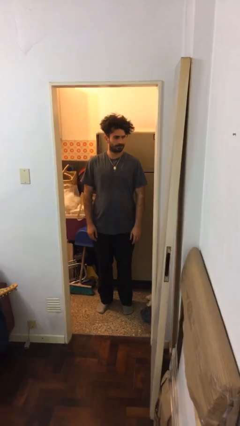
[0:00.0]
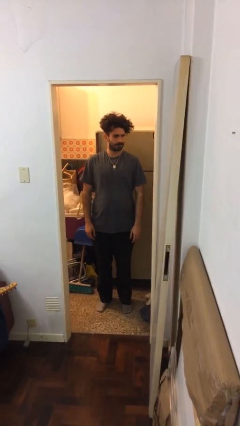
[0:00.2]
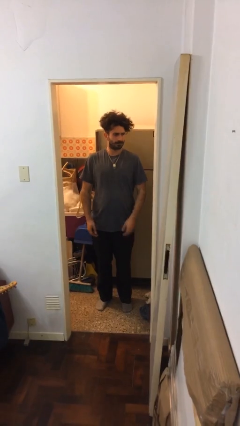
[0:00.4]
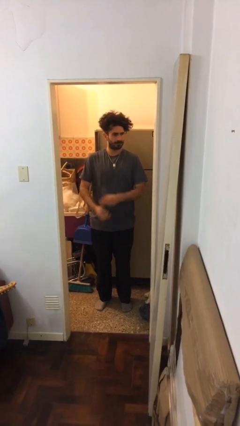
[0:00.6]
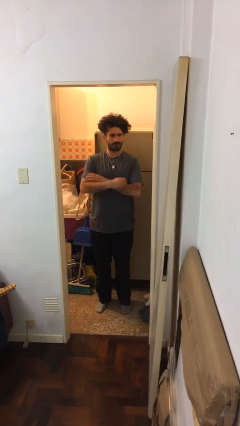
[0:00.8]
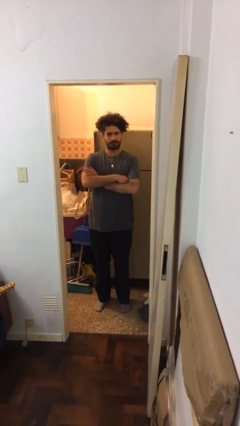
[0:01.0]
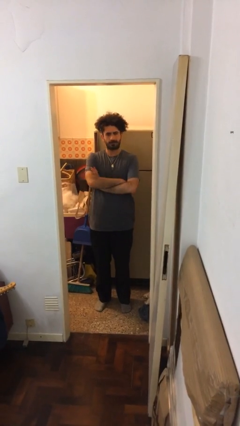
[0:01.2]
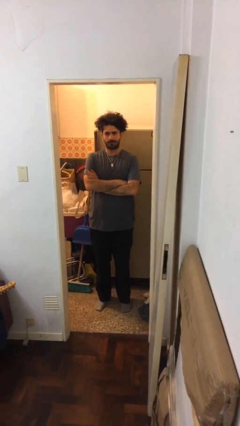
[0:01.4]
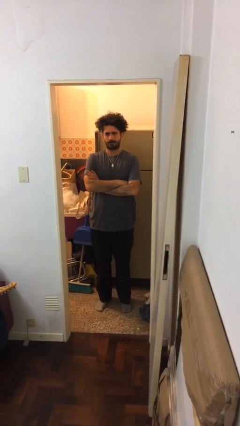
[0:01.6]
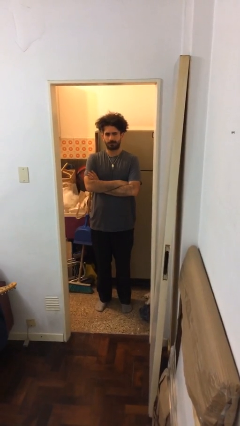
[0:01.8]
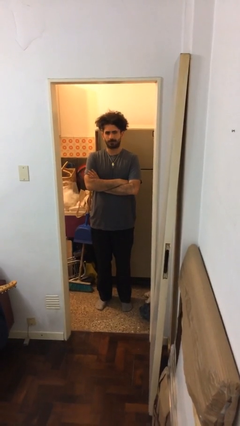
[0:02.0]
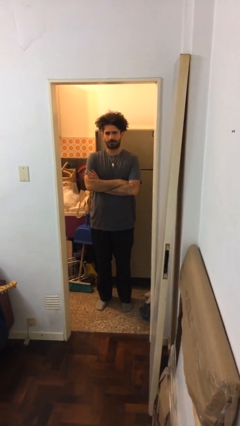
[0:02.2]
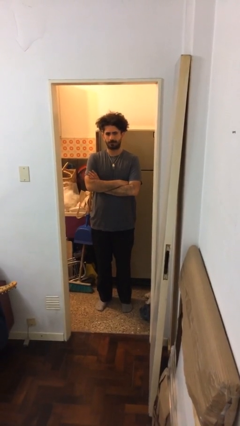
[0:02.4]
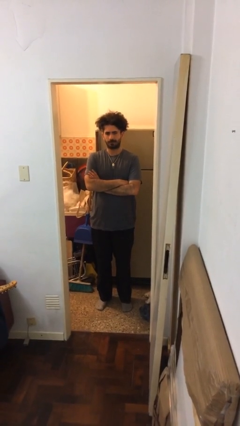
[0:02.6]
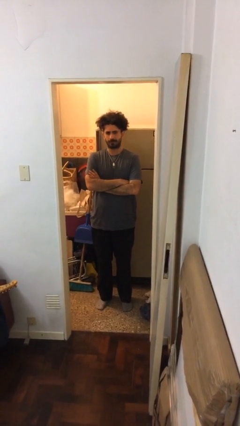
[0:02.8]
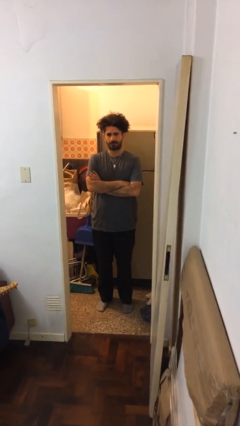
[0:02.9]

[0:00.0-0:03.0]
person crosses arms

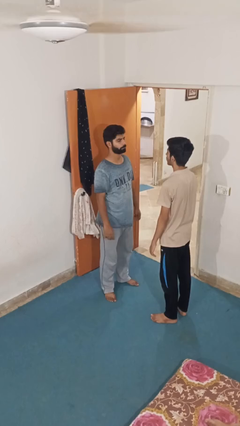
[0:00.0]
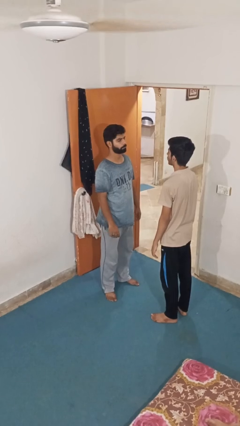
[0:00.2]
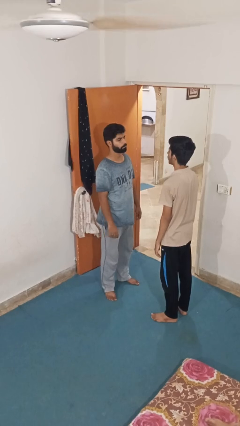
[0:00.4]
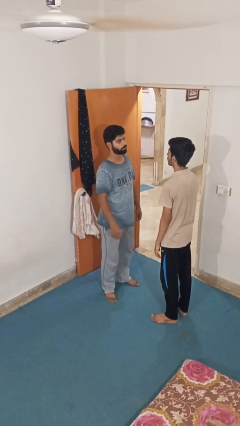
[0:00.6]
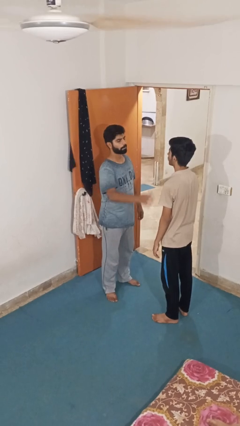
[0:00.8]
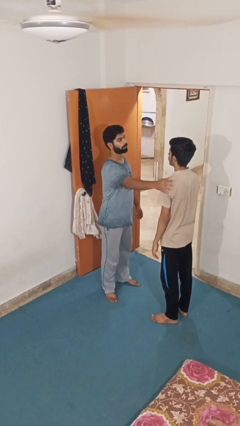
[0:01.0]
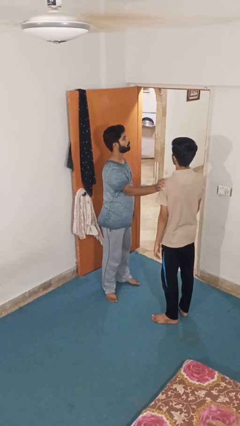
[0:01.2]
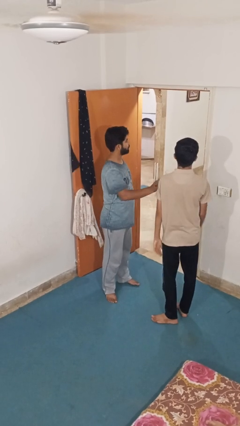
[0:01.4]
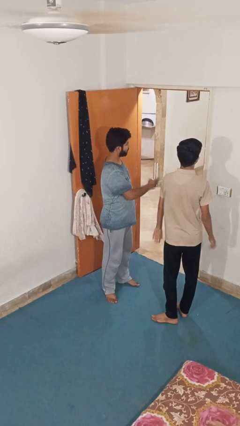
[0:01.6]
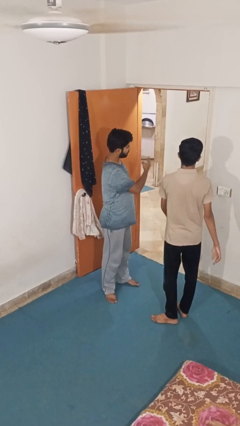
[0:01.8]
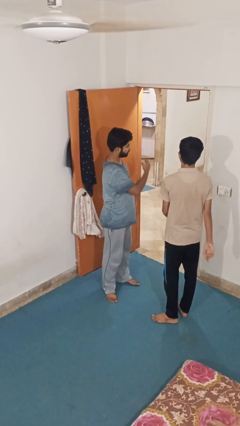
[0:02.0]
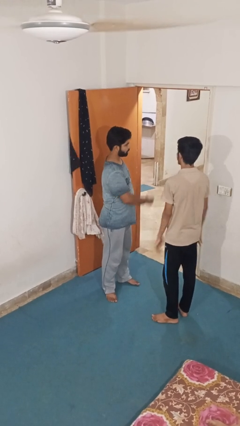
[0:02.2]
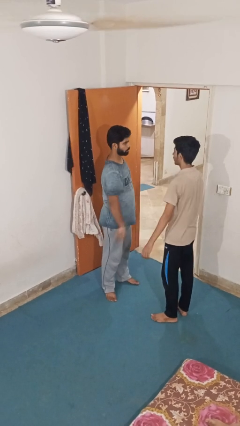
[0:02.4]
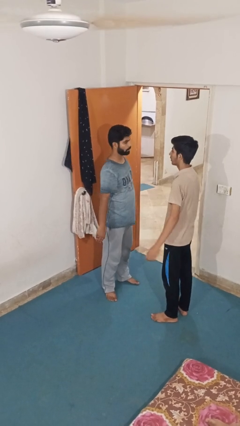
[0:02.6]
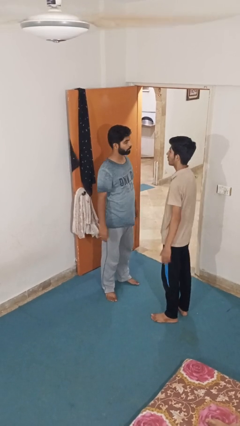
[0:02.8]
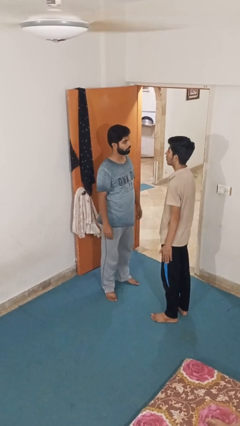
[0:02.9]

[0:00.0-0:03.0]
person shoves person

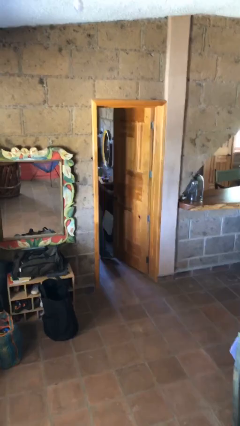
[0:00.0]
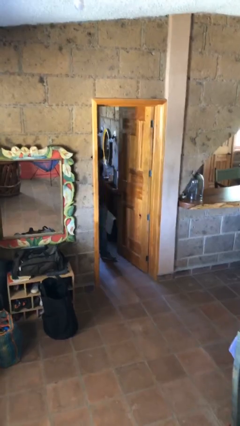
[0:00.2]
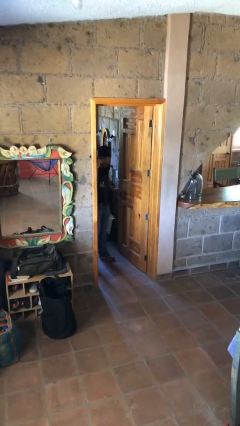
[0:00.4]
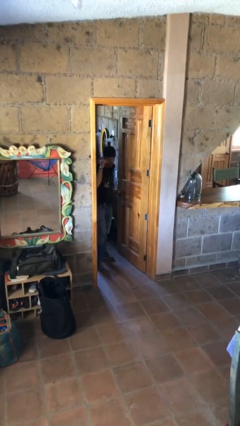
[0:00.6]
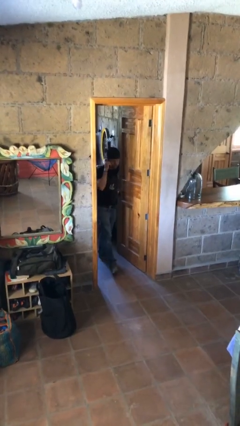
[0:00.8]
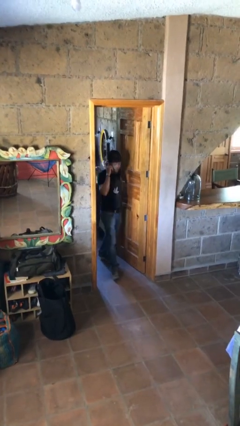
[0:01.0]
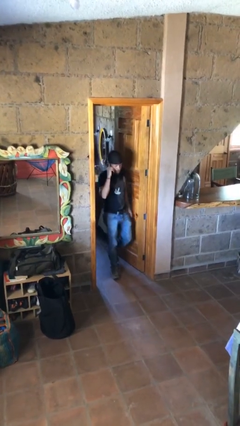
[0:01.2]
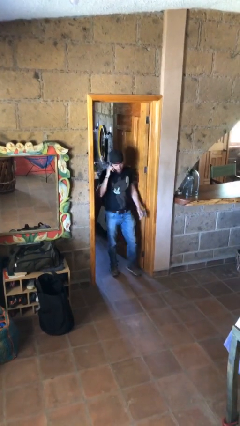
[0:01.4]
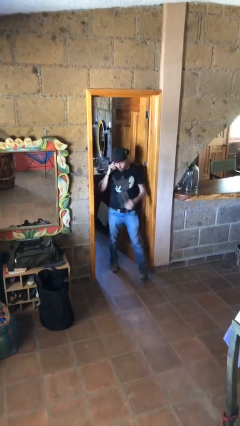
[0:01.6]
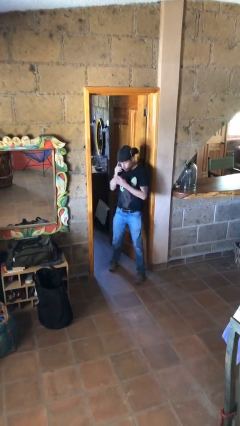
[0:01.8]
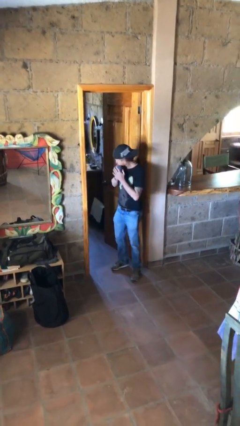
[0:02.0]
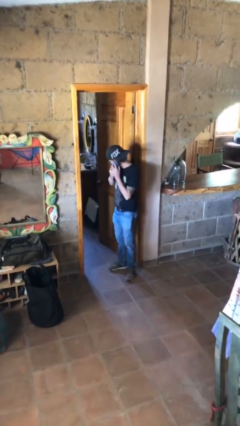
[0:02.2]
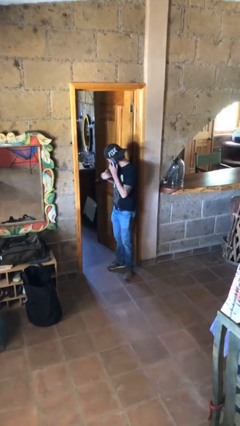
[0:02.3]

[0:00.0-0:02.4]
person enters scene through structure

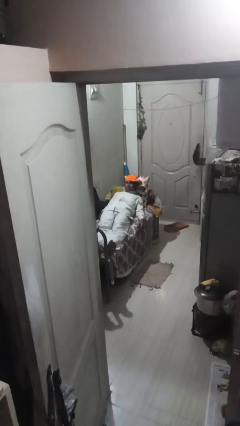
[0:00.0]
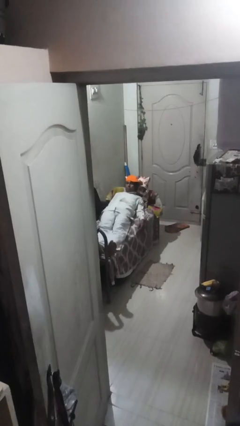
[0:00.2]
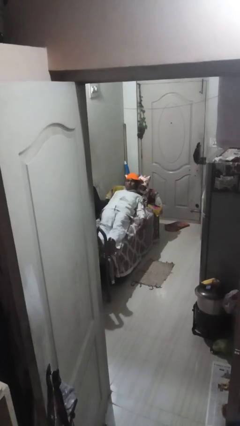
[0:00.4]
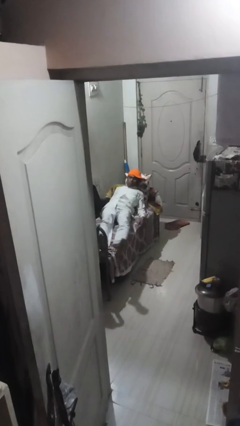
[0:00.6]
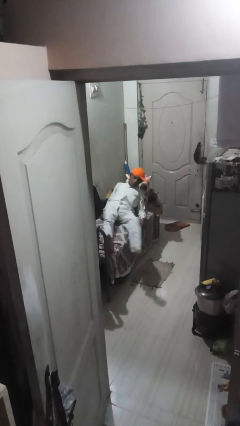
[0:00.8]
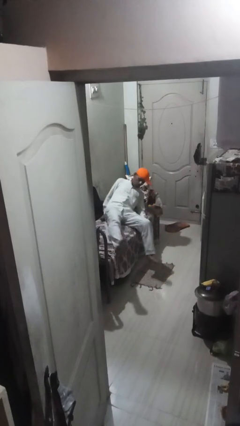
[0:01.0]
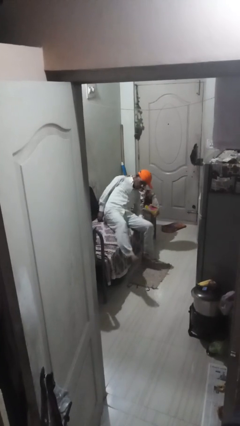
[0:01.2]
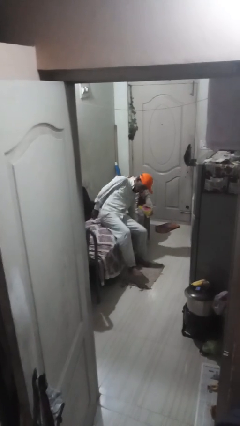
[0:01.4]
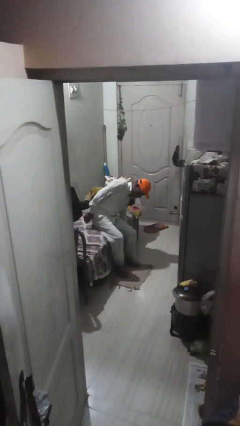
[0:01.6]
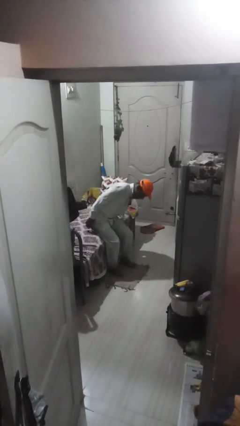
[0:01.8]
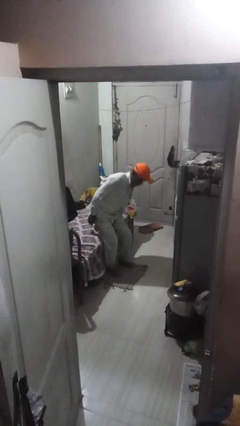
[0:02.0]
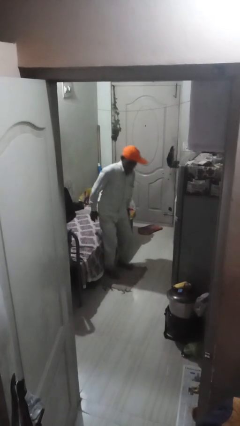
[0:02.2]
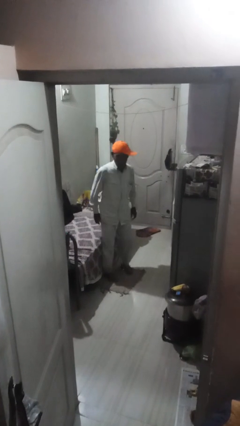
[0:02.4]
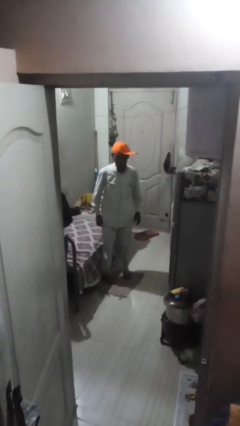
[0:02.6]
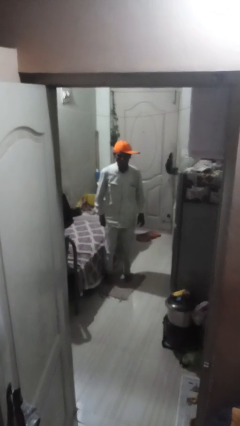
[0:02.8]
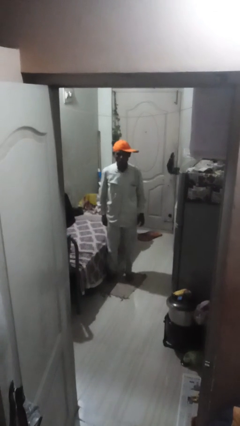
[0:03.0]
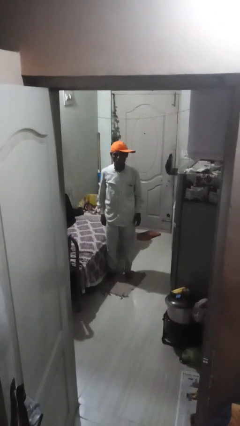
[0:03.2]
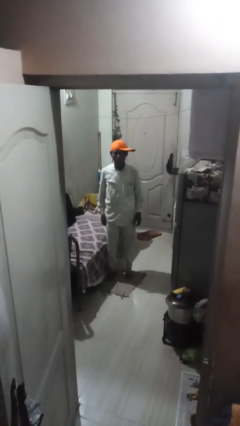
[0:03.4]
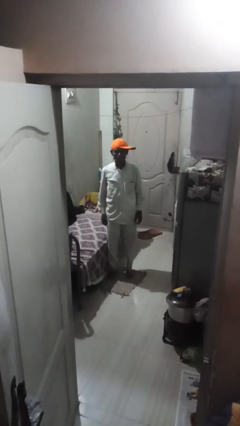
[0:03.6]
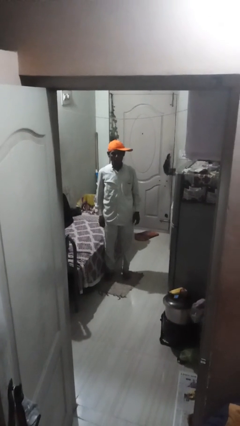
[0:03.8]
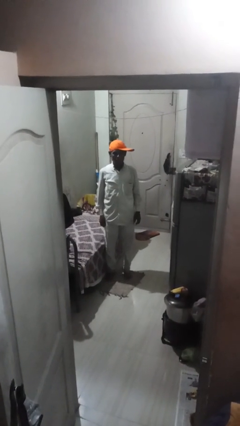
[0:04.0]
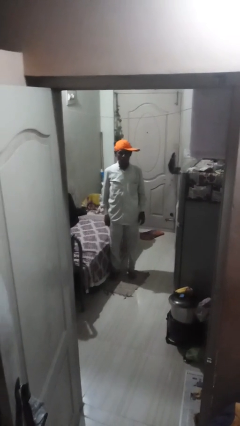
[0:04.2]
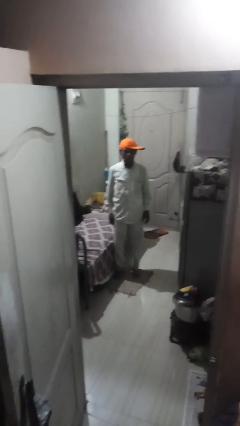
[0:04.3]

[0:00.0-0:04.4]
person stands up

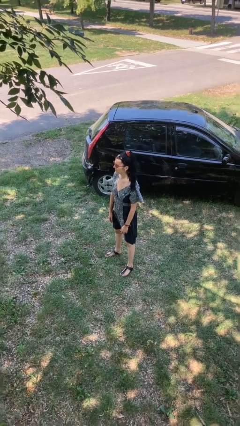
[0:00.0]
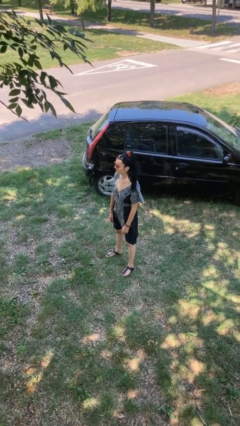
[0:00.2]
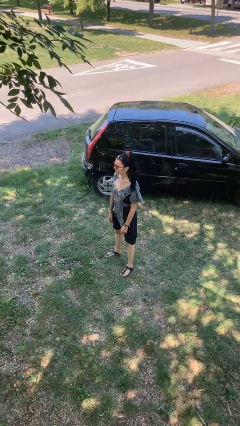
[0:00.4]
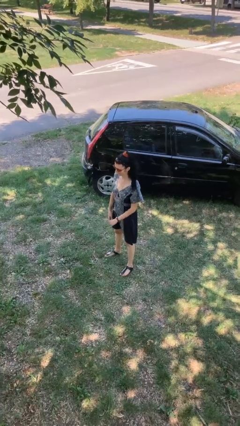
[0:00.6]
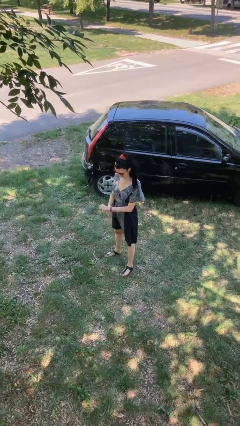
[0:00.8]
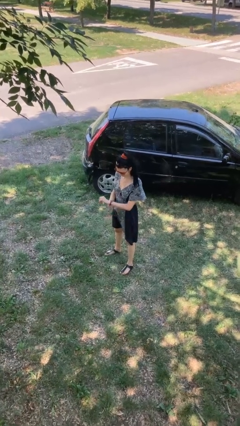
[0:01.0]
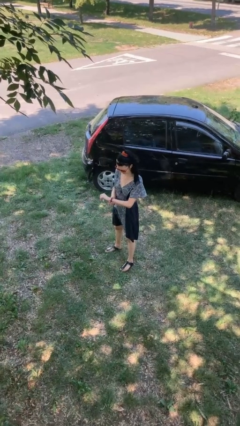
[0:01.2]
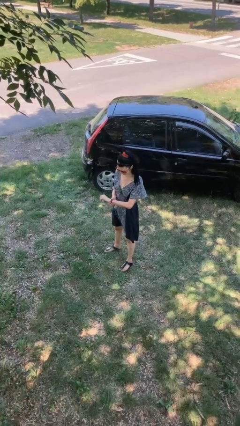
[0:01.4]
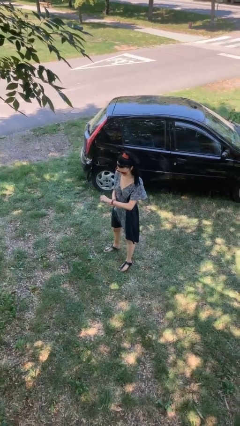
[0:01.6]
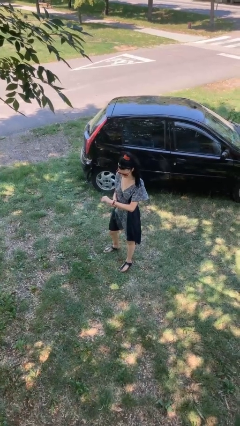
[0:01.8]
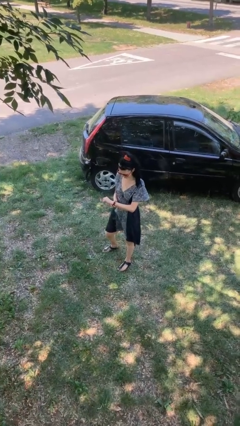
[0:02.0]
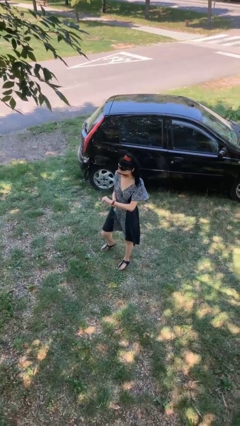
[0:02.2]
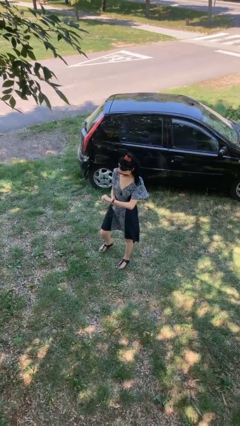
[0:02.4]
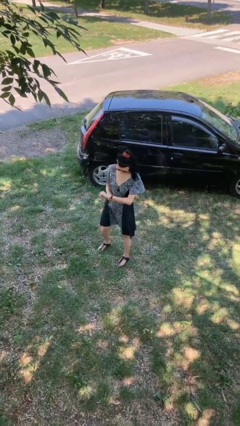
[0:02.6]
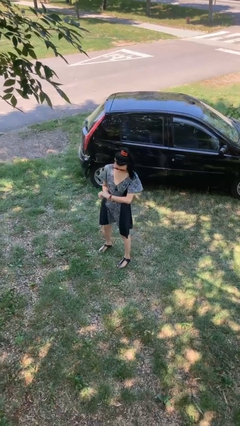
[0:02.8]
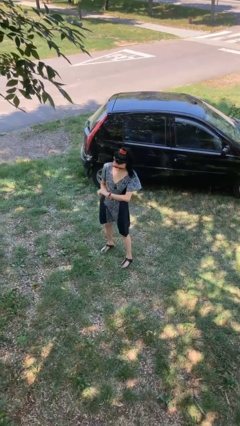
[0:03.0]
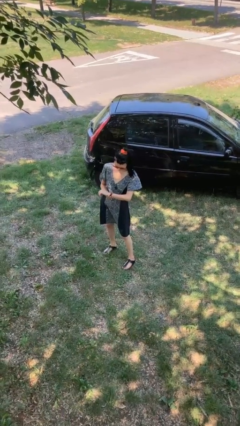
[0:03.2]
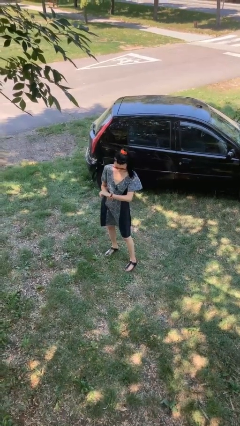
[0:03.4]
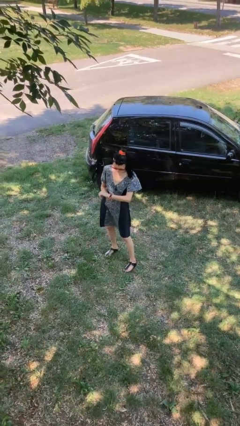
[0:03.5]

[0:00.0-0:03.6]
person looks at wristwatch

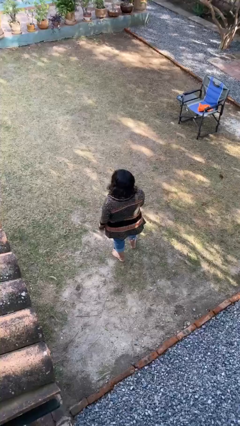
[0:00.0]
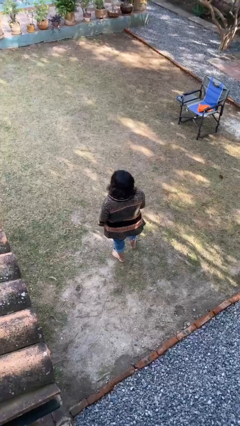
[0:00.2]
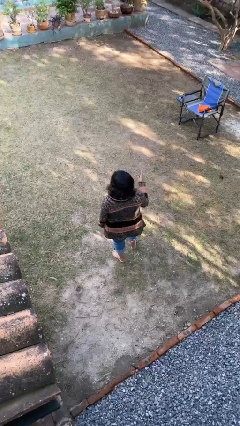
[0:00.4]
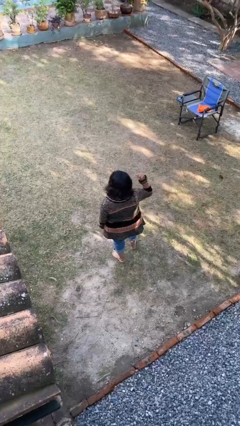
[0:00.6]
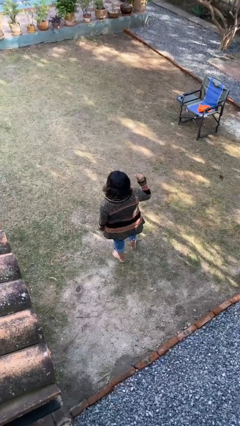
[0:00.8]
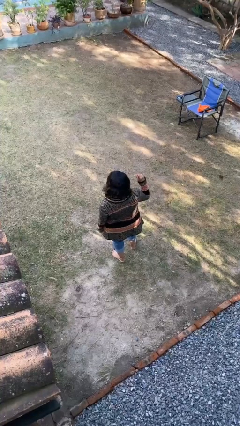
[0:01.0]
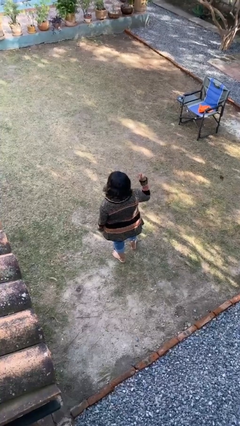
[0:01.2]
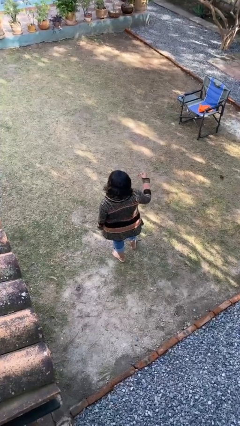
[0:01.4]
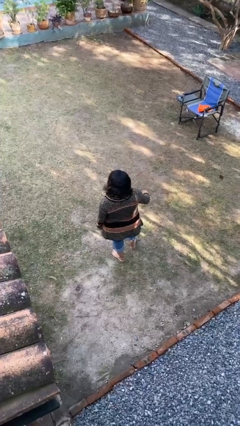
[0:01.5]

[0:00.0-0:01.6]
person gestures number one
